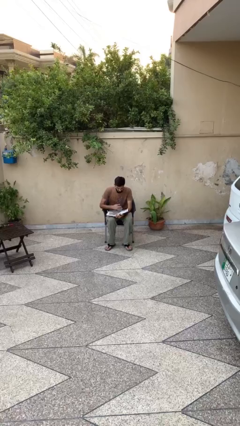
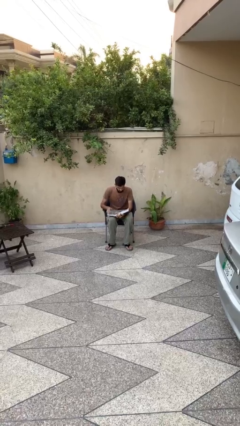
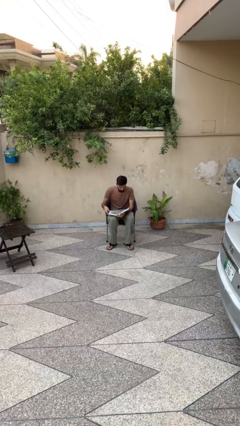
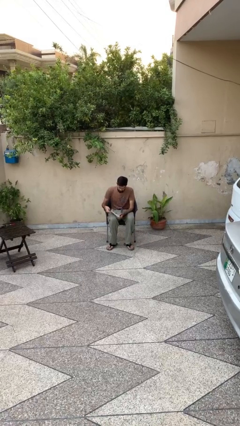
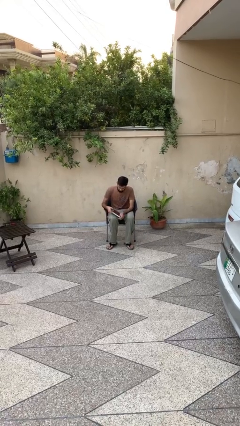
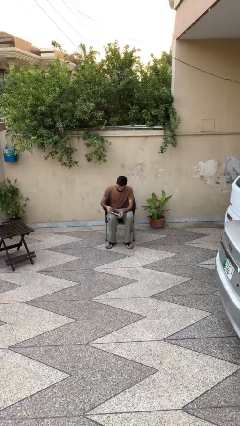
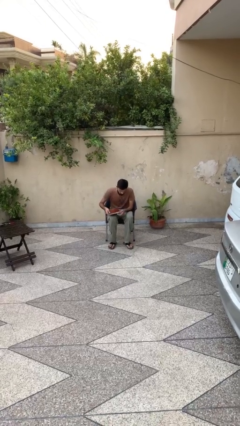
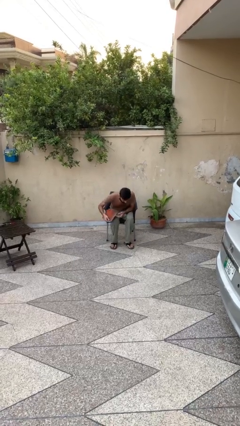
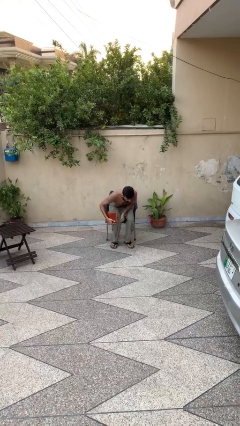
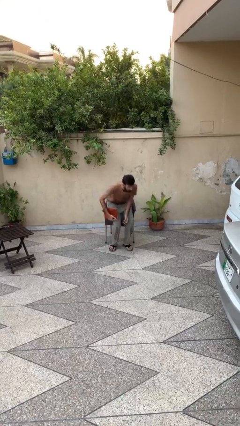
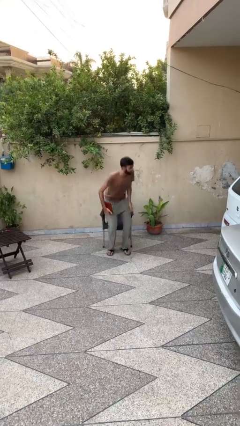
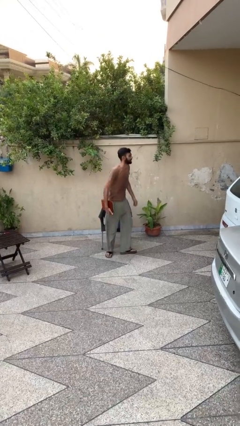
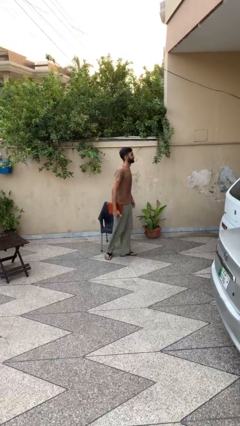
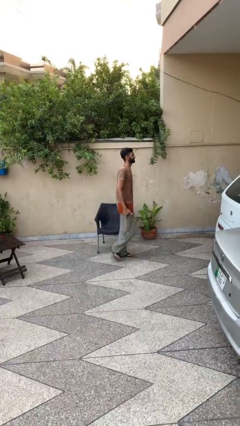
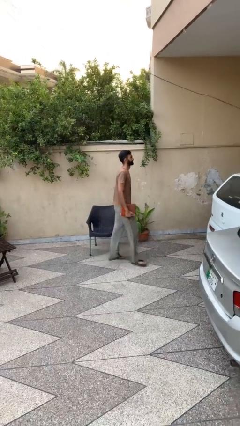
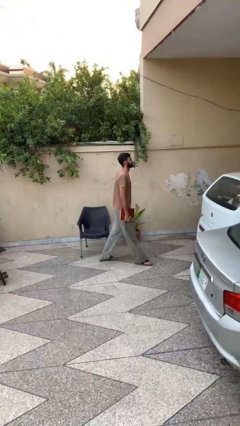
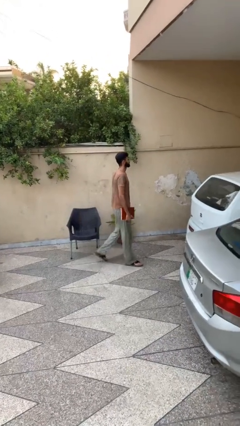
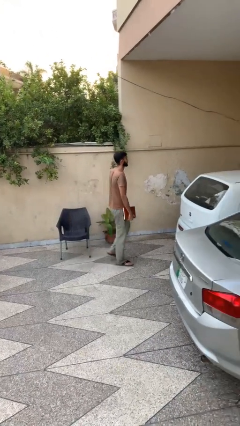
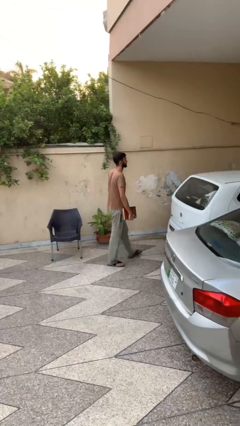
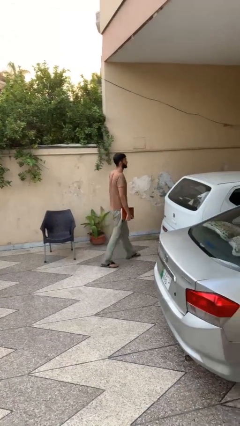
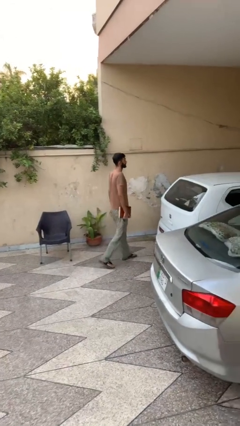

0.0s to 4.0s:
person stands up

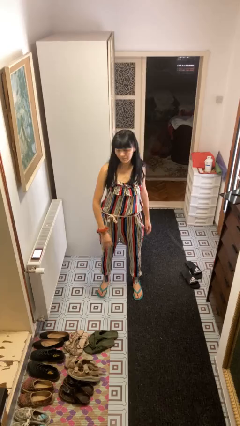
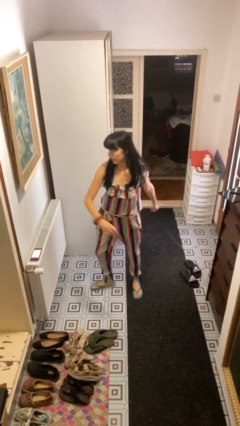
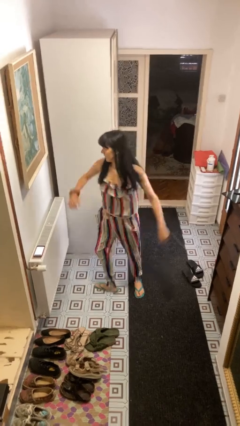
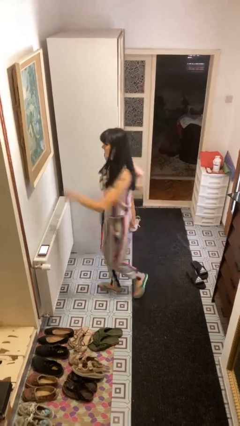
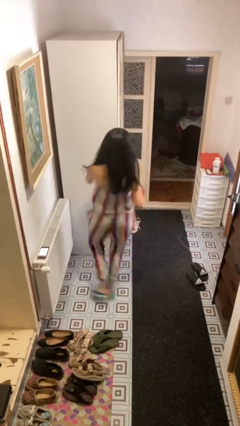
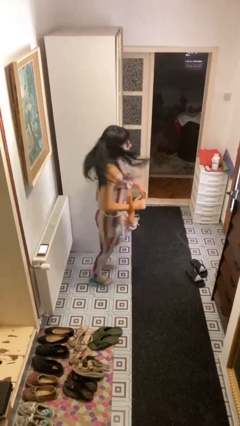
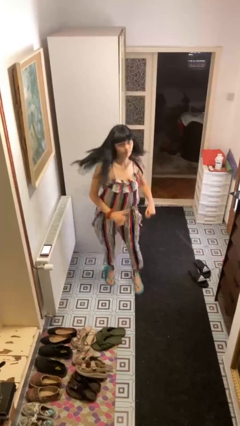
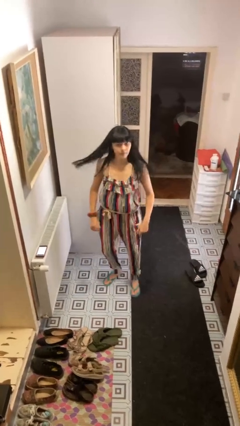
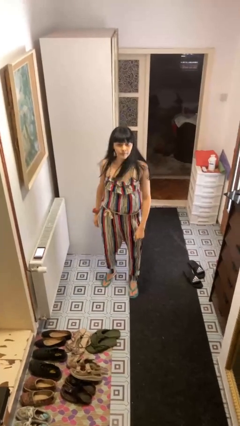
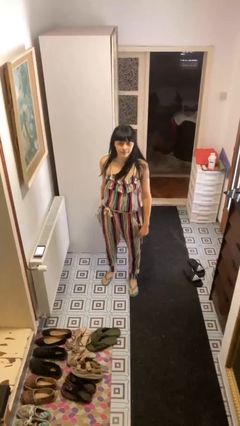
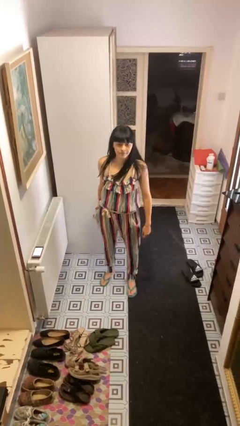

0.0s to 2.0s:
person twirls

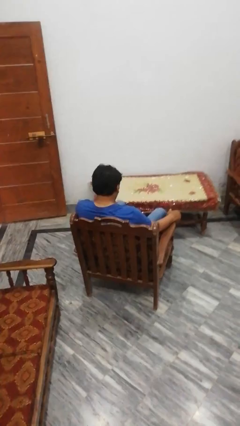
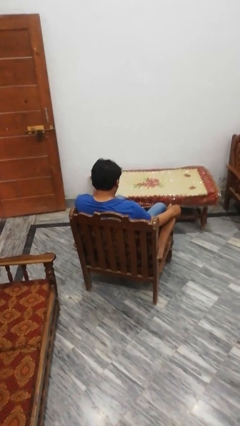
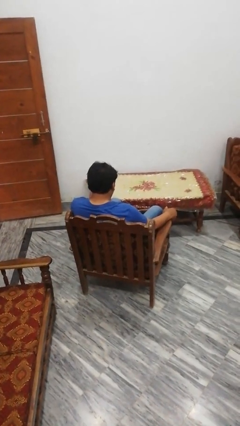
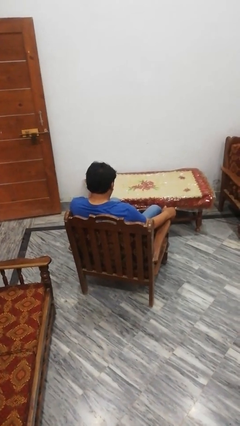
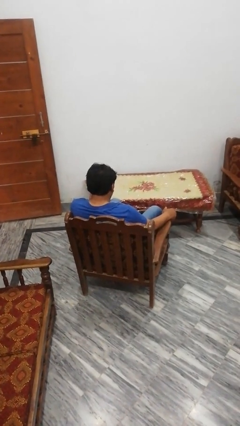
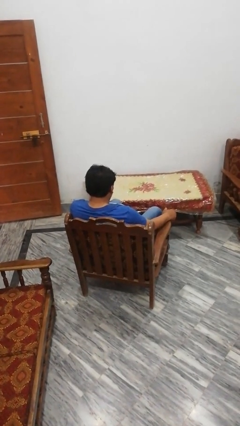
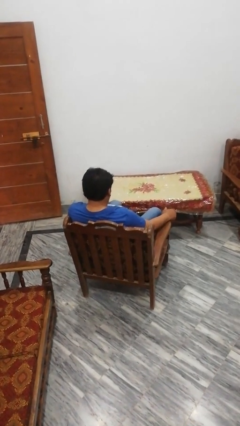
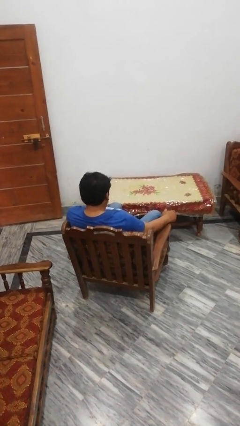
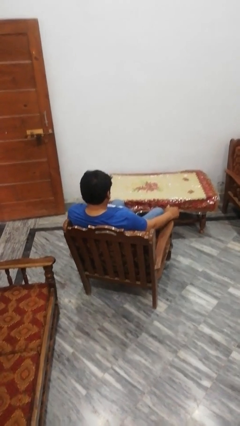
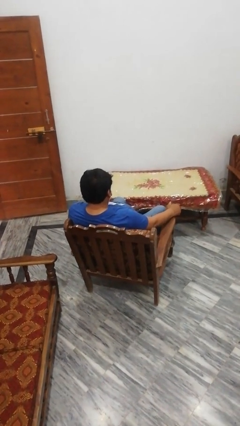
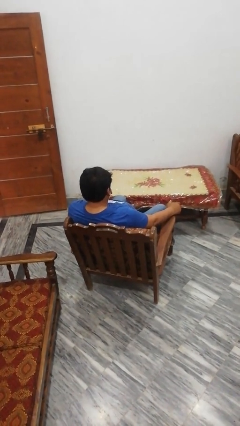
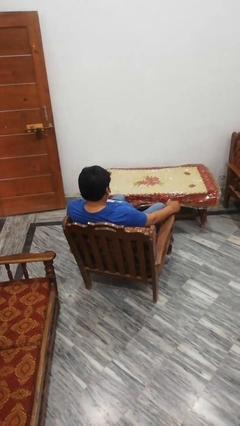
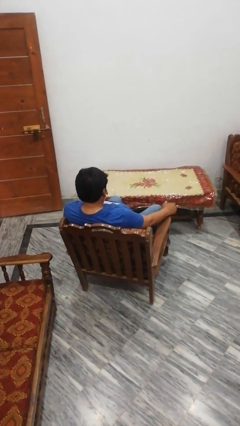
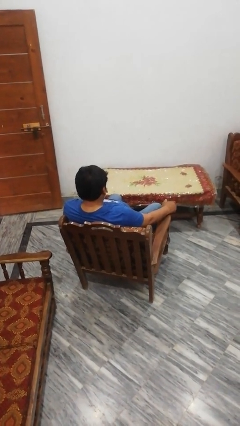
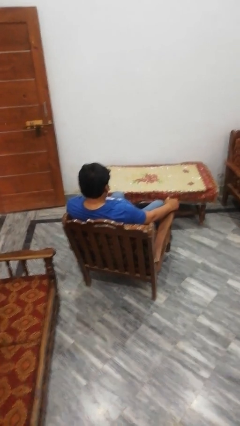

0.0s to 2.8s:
person pulls out chair

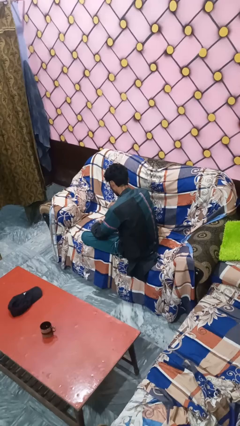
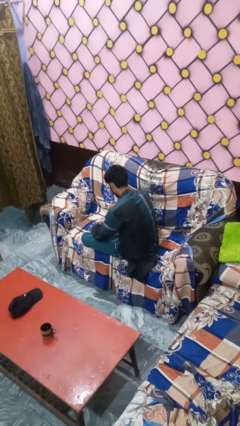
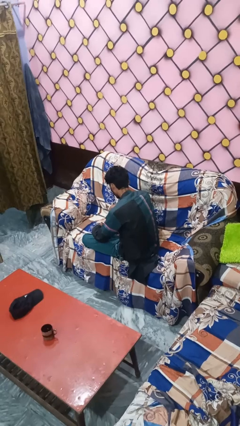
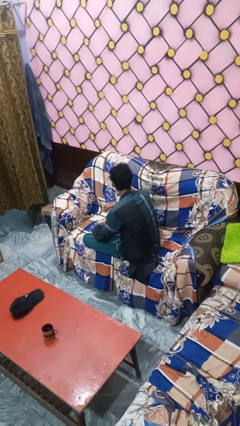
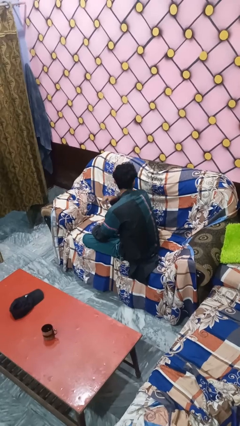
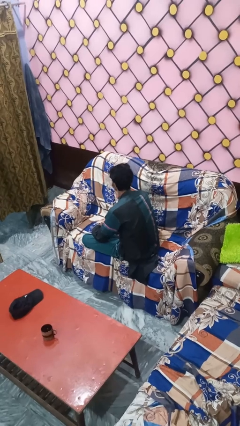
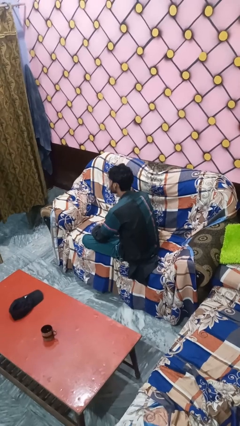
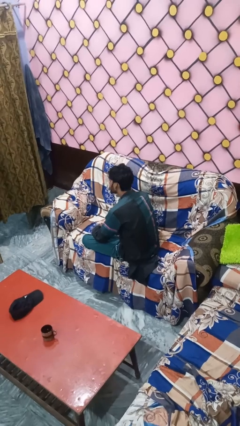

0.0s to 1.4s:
person gestures cut

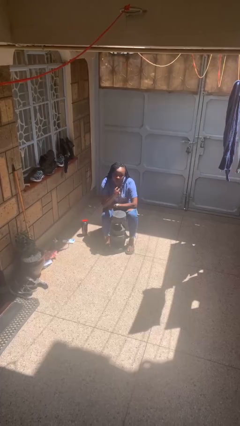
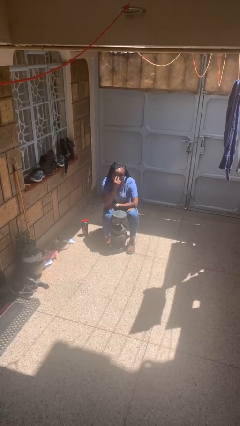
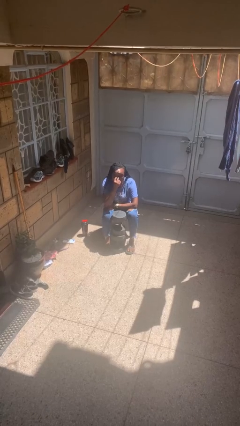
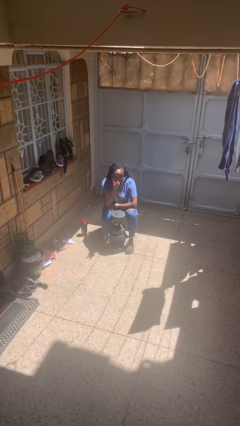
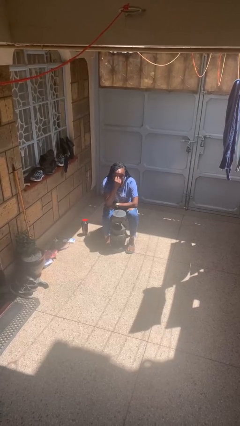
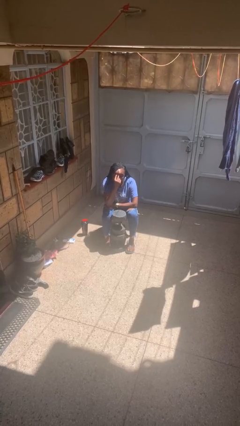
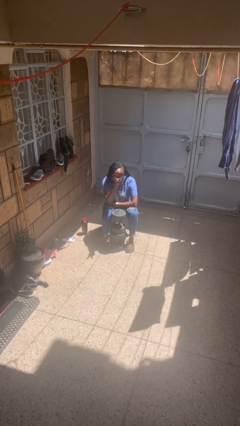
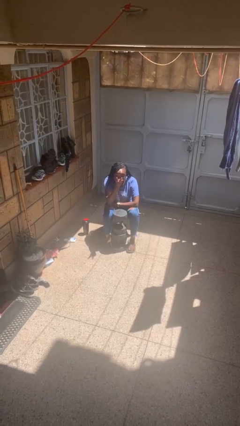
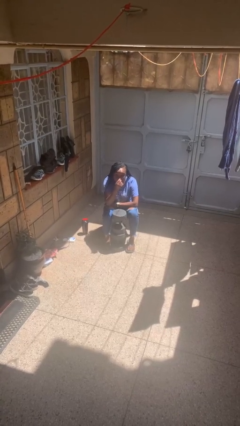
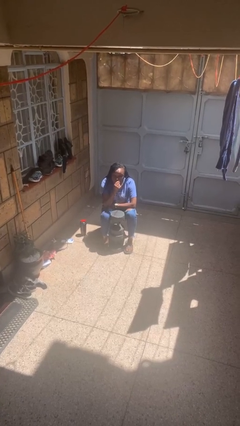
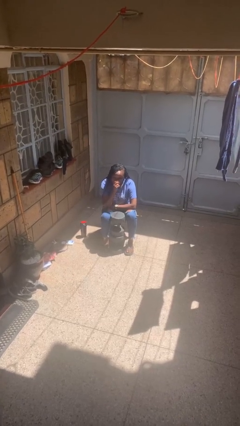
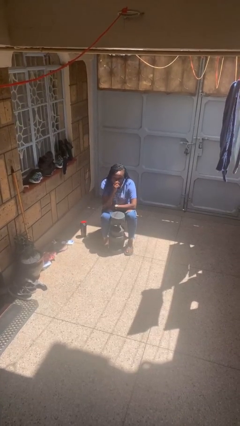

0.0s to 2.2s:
person gestures watch closely

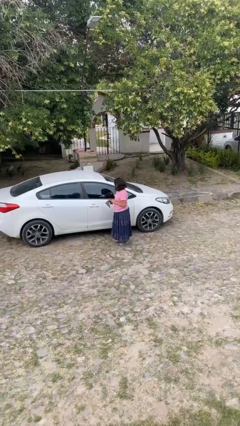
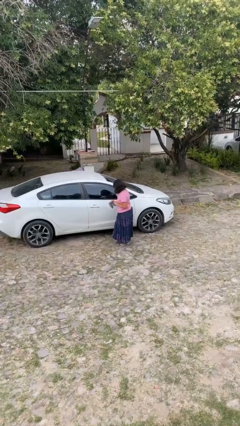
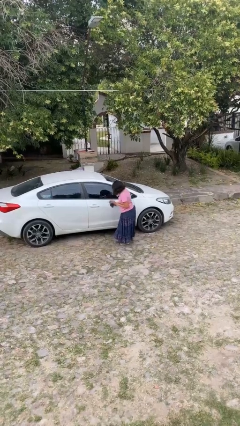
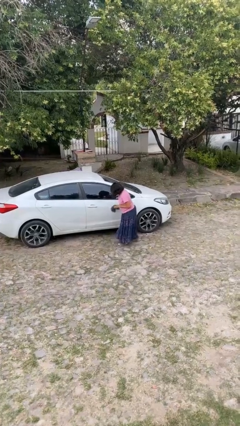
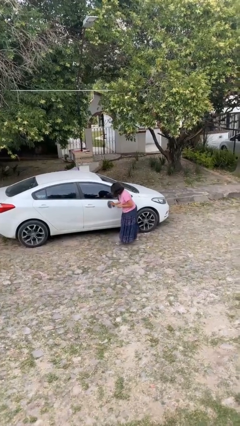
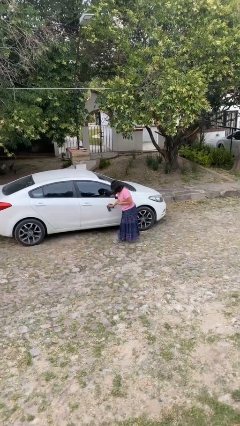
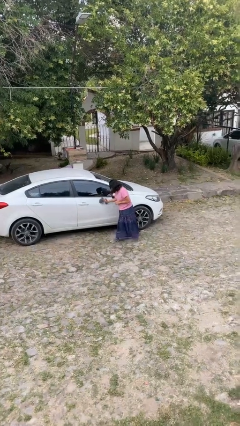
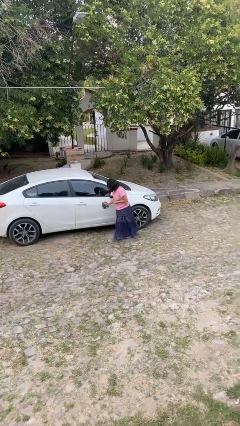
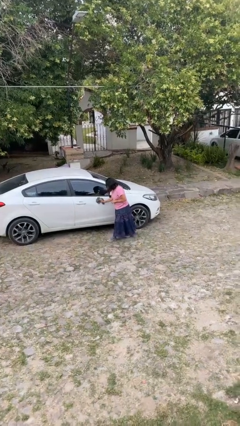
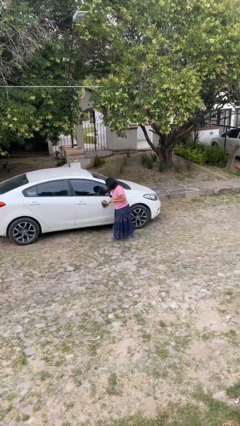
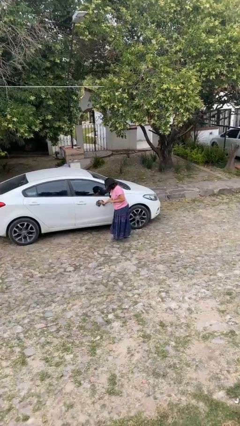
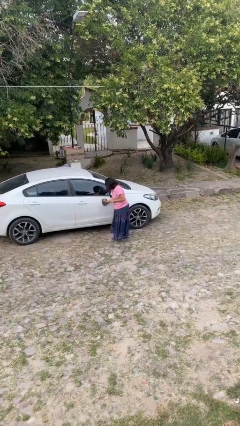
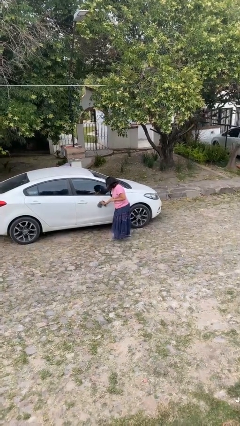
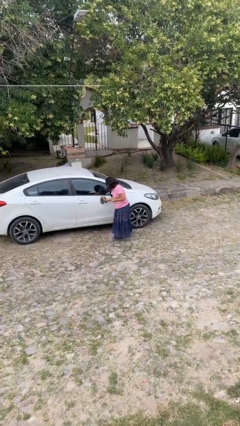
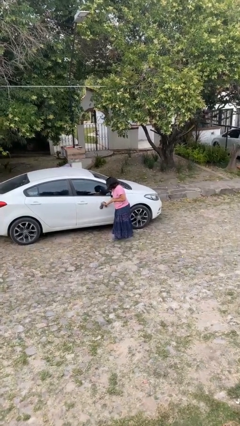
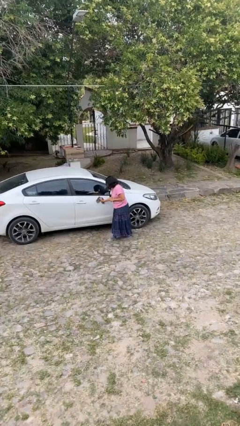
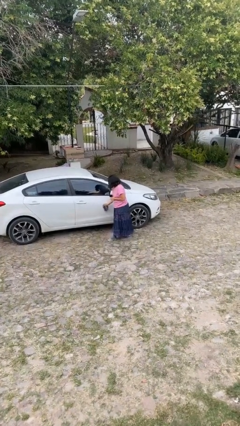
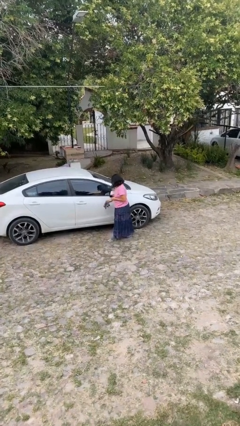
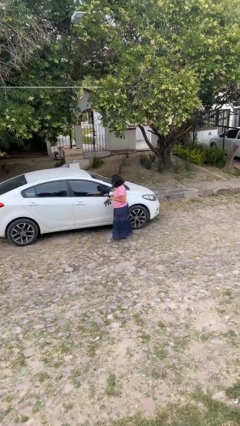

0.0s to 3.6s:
person polishes car with rag

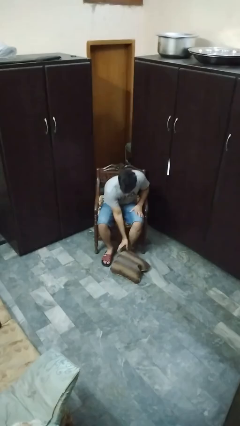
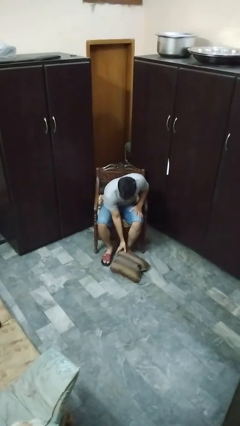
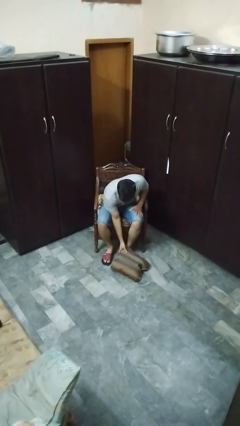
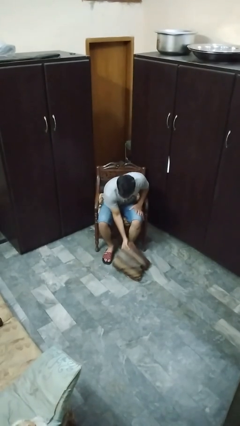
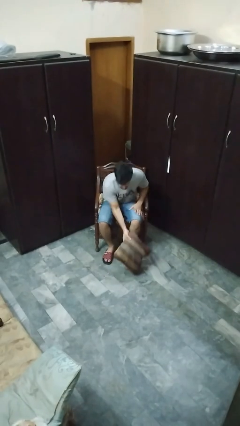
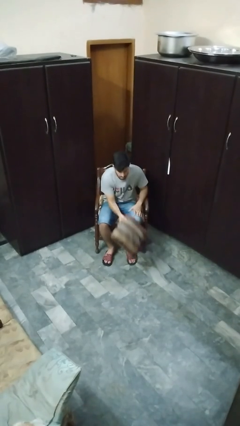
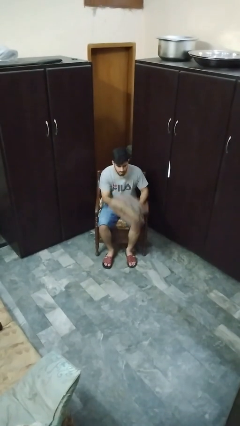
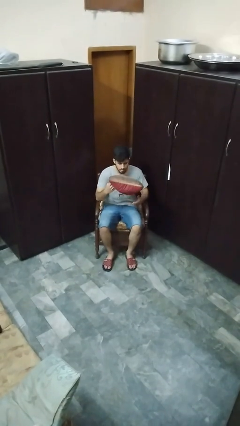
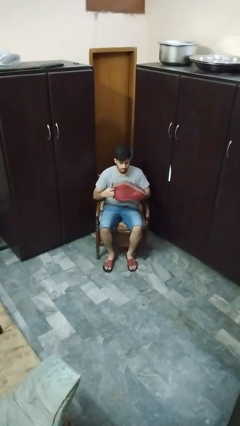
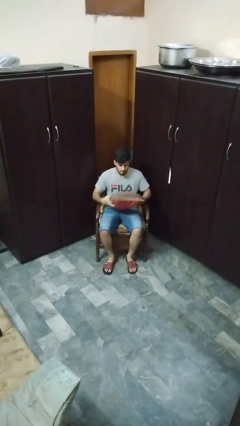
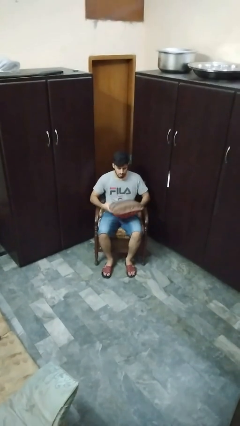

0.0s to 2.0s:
person picks up object from floor
